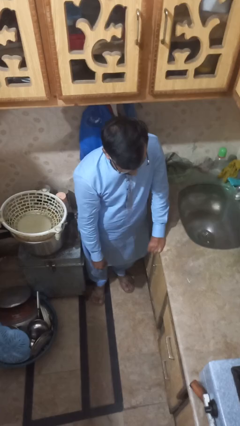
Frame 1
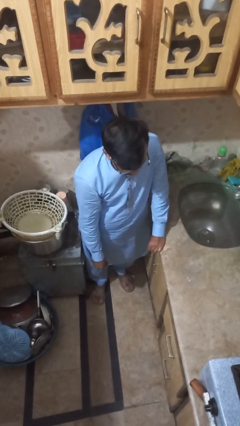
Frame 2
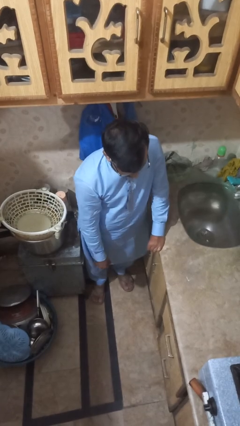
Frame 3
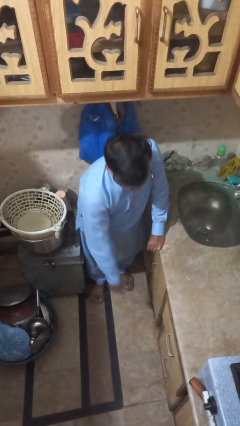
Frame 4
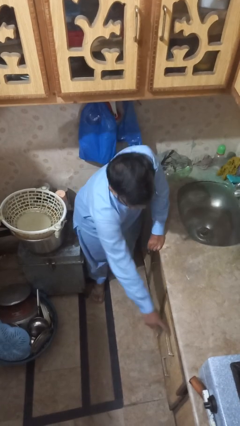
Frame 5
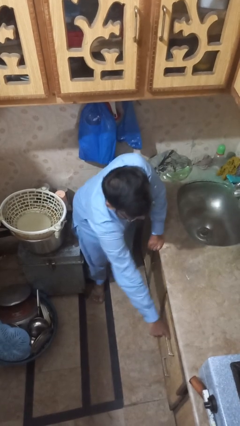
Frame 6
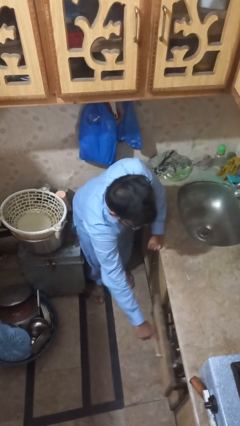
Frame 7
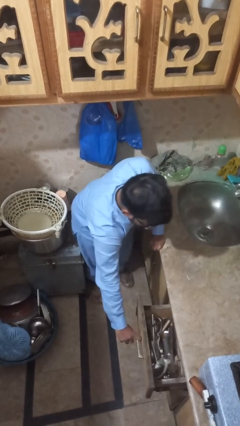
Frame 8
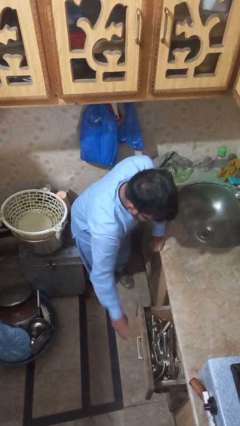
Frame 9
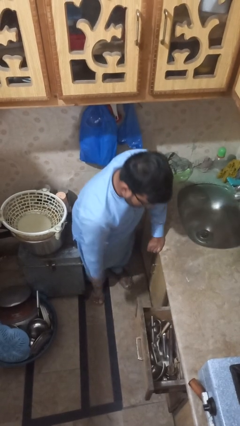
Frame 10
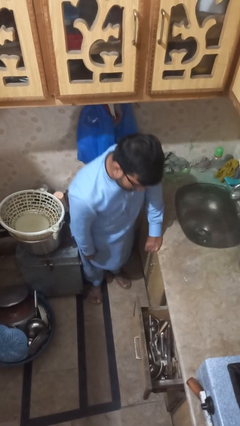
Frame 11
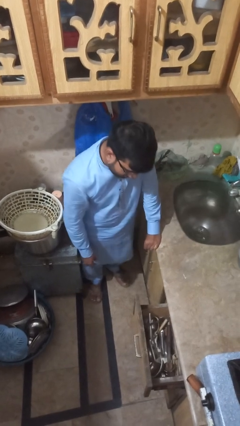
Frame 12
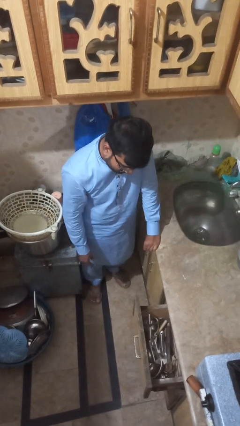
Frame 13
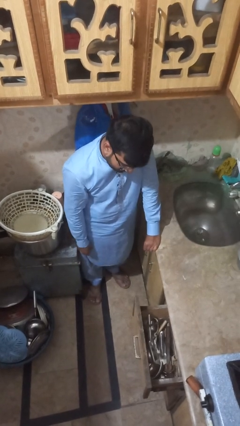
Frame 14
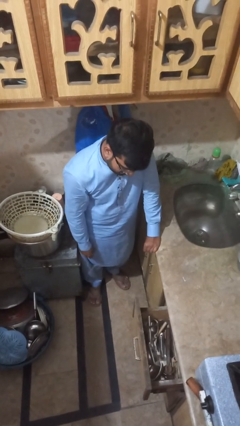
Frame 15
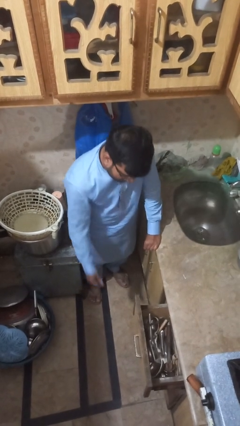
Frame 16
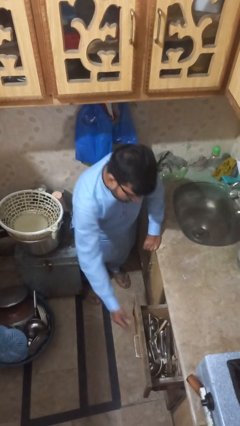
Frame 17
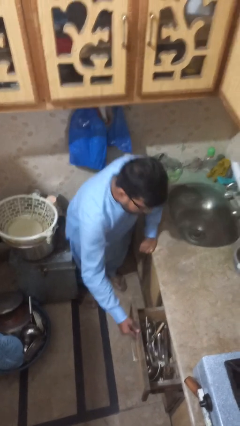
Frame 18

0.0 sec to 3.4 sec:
person opens kitchen drawer

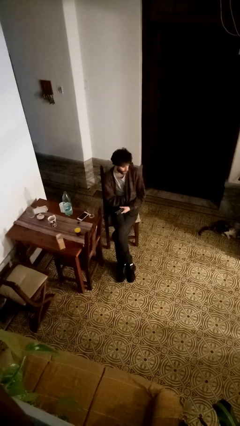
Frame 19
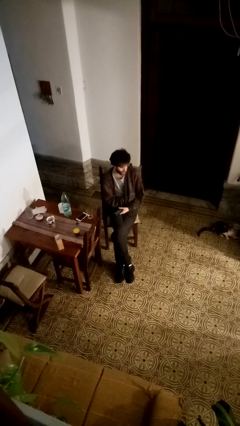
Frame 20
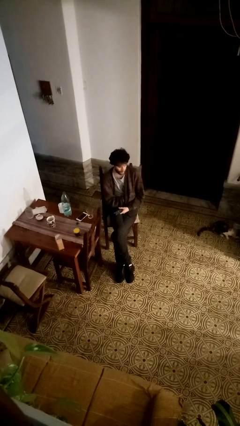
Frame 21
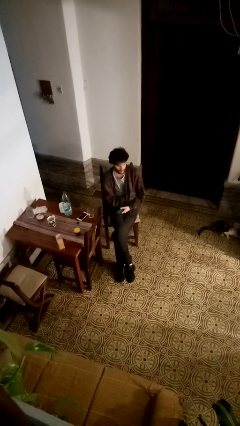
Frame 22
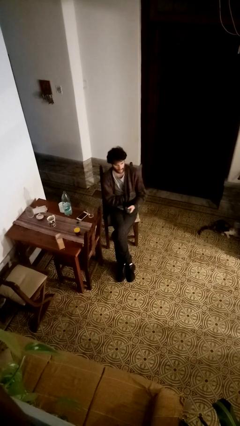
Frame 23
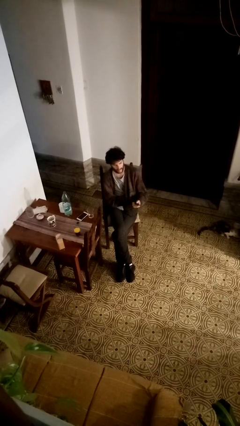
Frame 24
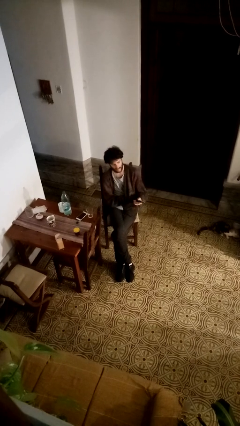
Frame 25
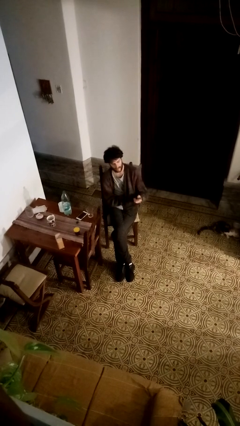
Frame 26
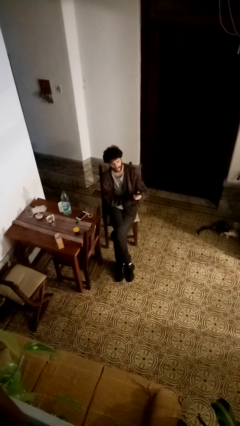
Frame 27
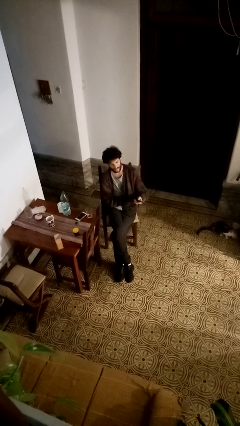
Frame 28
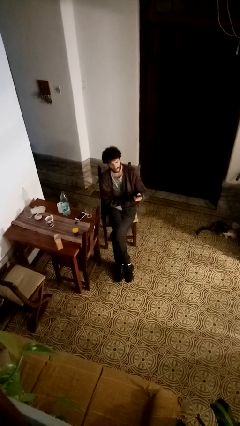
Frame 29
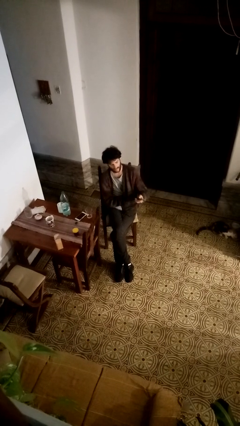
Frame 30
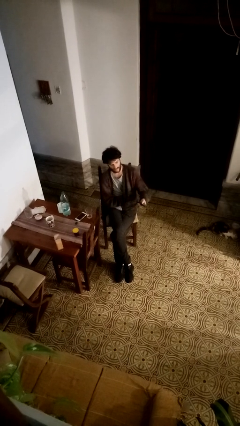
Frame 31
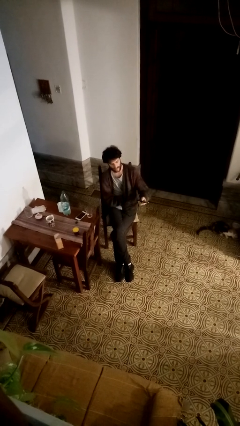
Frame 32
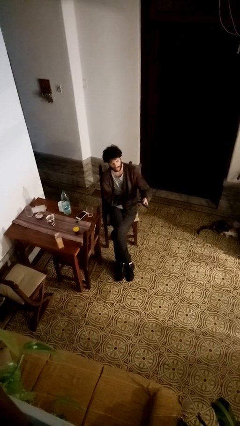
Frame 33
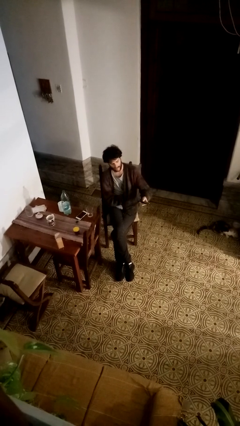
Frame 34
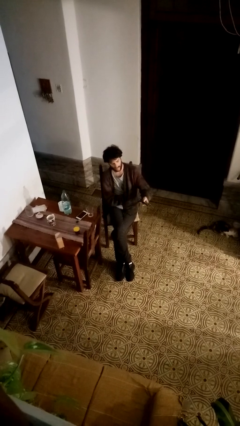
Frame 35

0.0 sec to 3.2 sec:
person uses television remote

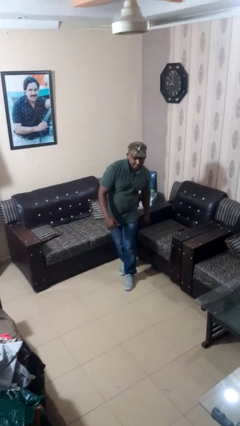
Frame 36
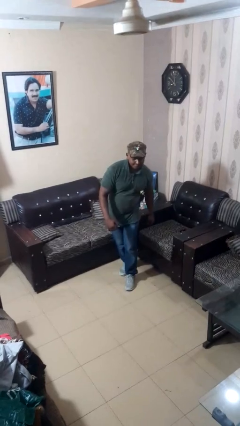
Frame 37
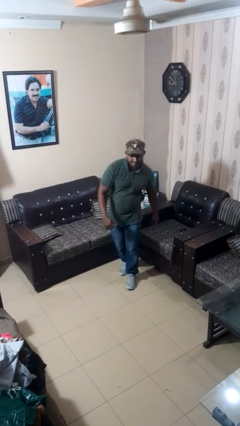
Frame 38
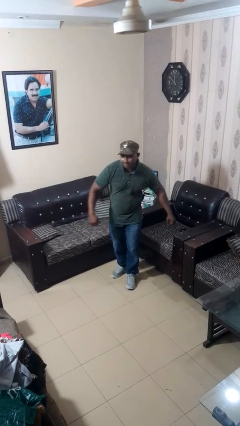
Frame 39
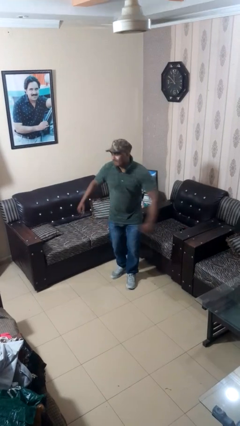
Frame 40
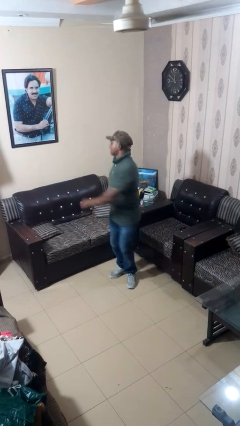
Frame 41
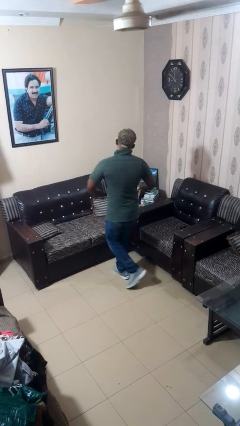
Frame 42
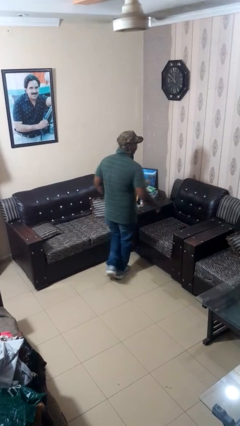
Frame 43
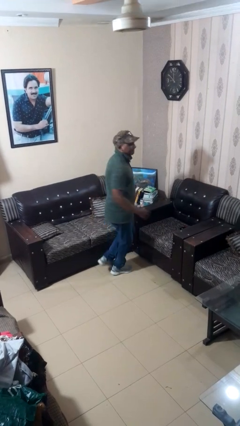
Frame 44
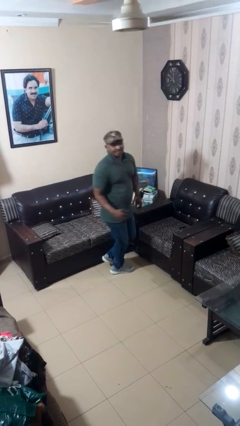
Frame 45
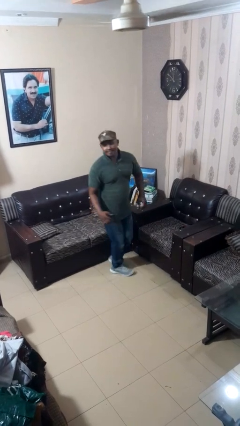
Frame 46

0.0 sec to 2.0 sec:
person twirls

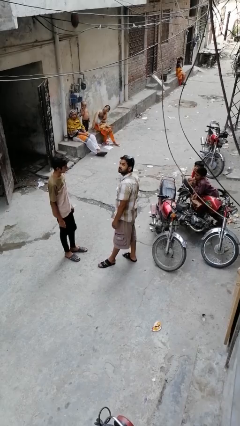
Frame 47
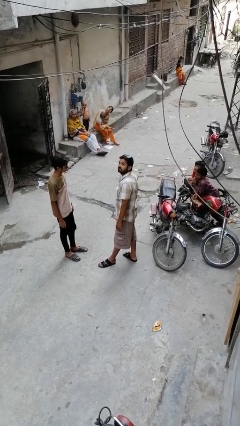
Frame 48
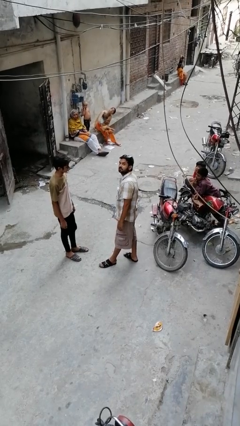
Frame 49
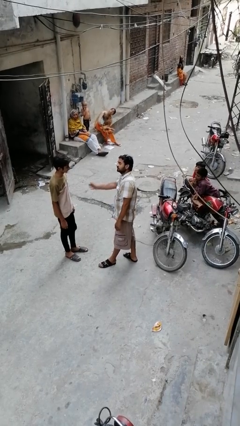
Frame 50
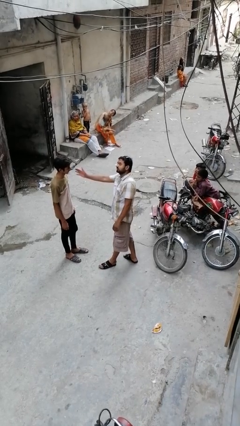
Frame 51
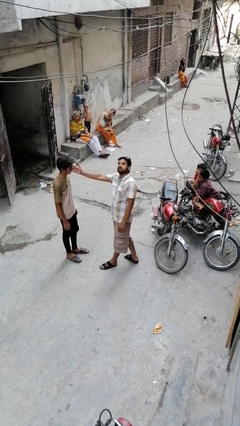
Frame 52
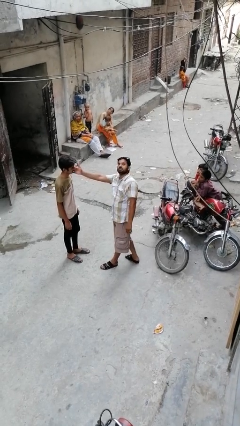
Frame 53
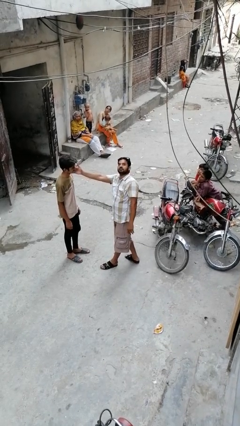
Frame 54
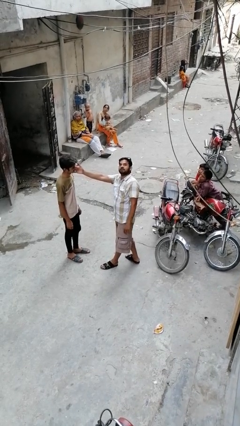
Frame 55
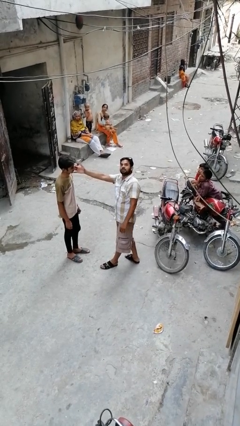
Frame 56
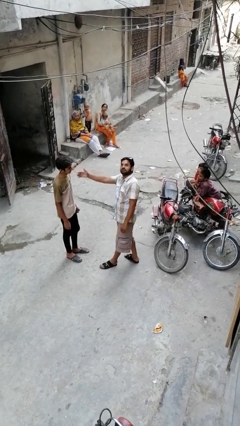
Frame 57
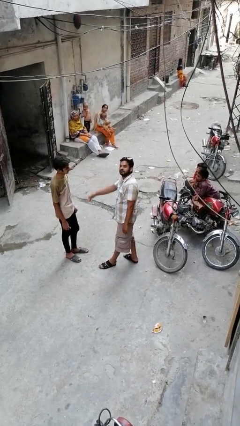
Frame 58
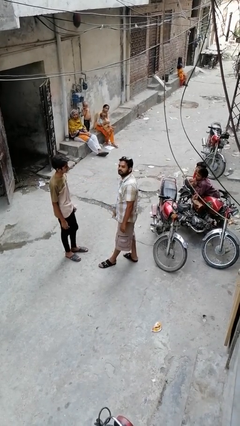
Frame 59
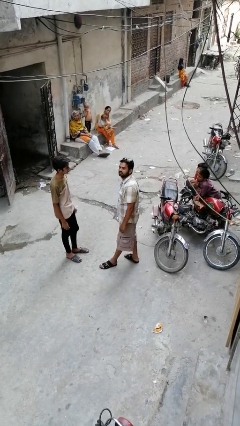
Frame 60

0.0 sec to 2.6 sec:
person touches face of person

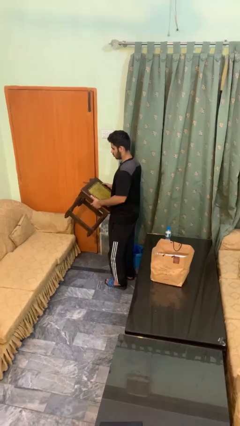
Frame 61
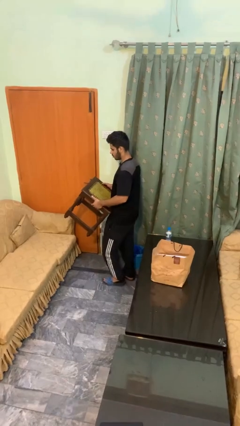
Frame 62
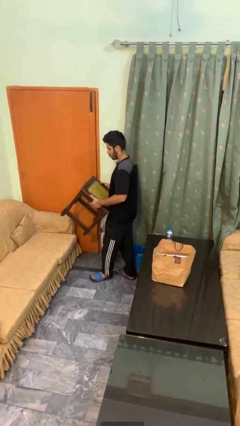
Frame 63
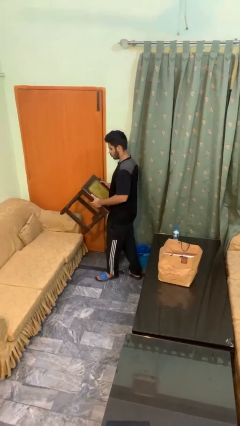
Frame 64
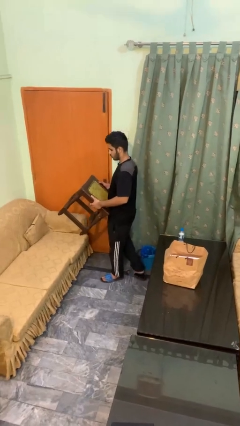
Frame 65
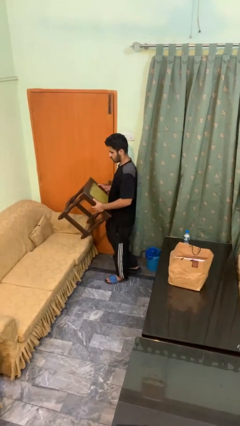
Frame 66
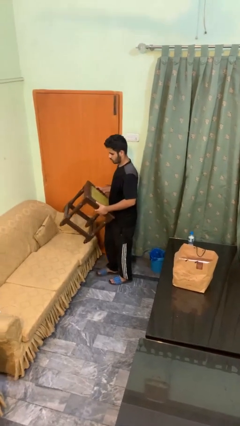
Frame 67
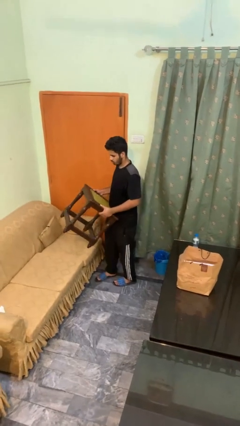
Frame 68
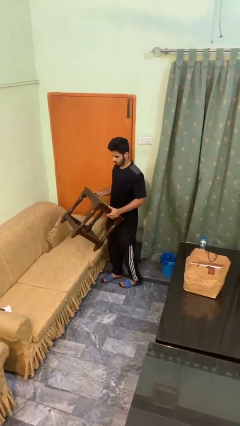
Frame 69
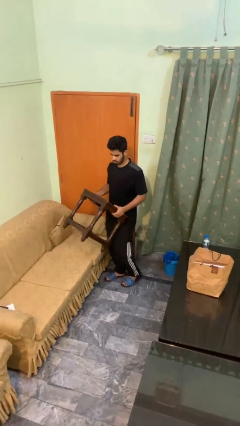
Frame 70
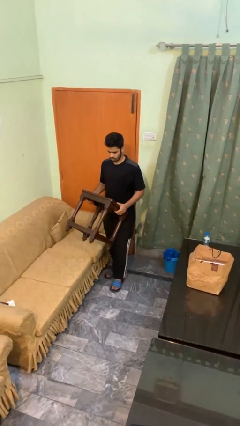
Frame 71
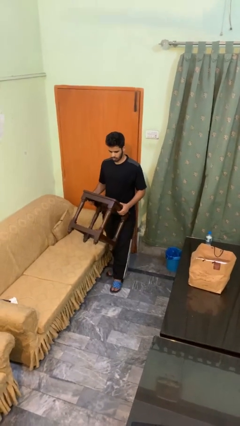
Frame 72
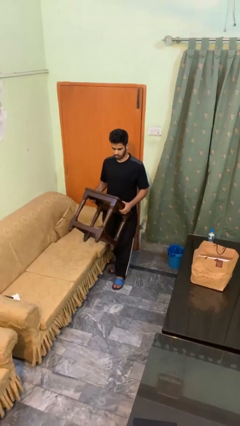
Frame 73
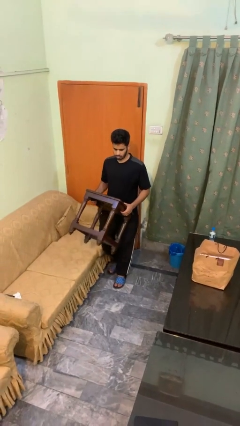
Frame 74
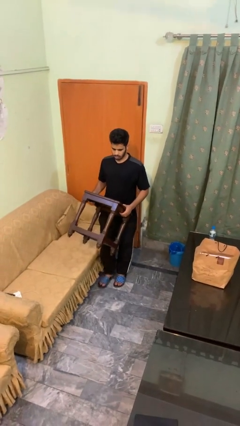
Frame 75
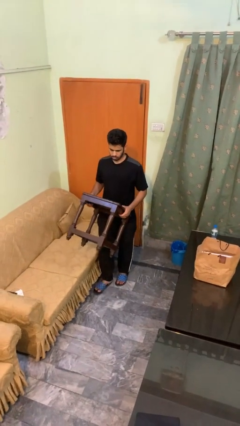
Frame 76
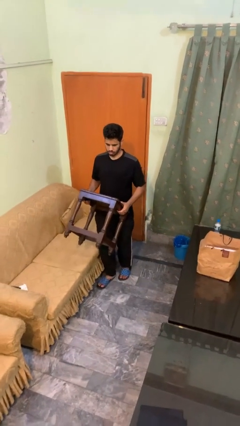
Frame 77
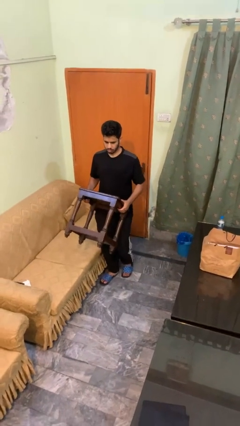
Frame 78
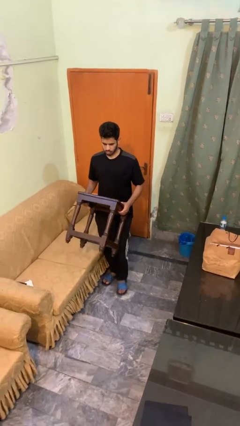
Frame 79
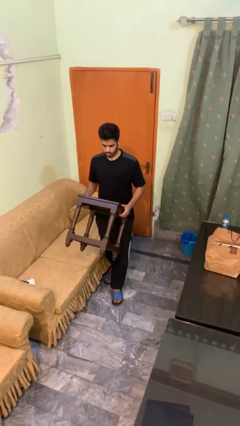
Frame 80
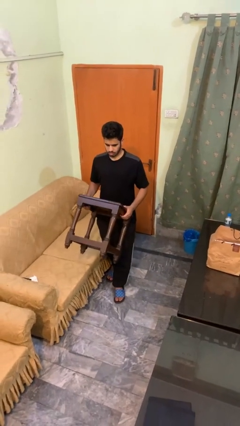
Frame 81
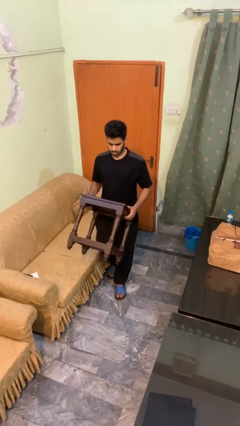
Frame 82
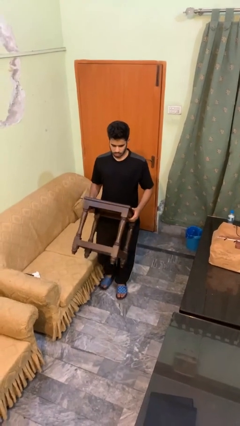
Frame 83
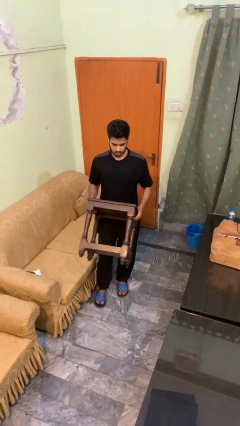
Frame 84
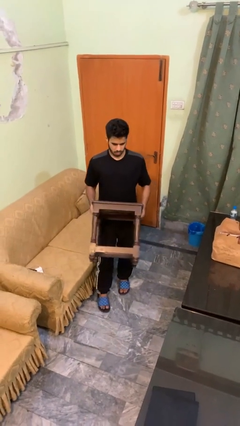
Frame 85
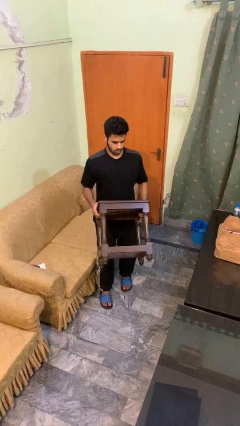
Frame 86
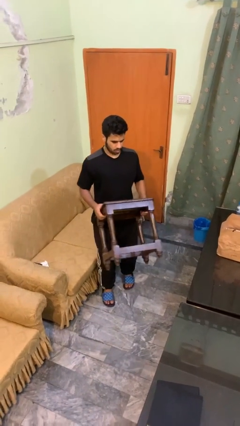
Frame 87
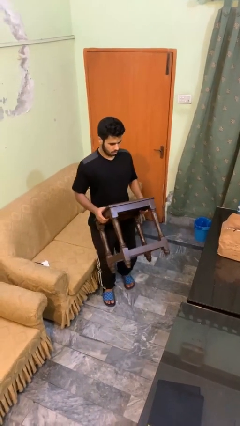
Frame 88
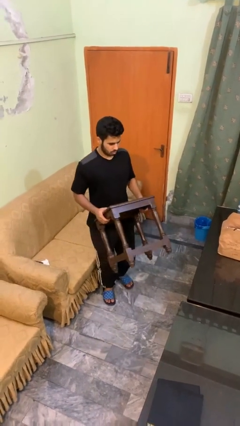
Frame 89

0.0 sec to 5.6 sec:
person carries furniture

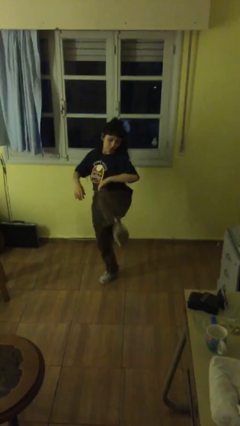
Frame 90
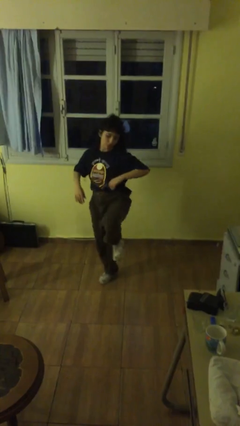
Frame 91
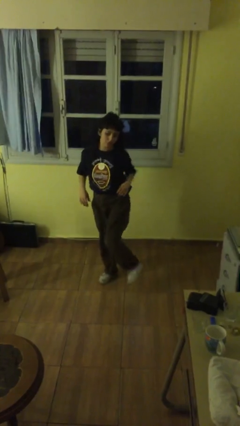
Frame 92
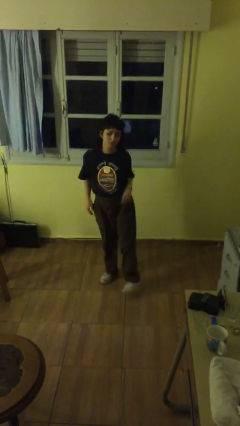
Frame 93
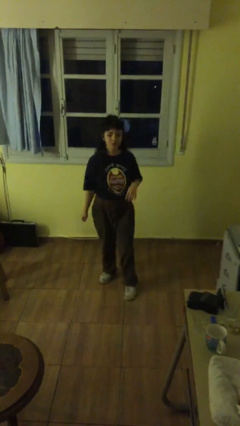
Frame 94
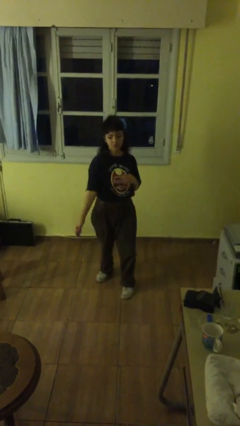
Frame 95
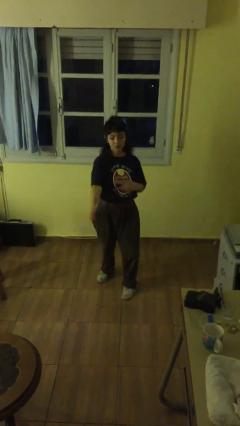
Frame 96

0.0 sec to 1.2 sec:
person karate kicks
